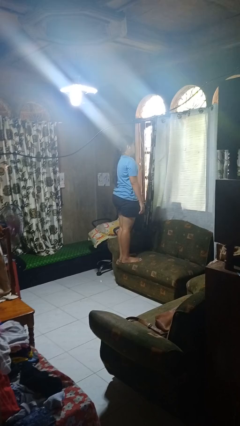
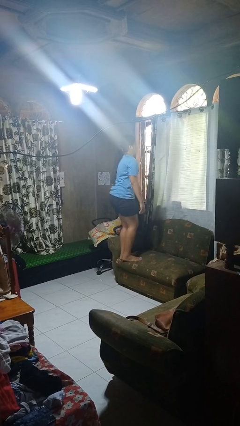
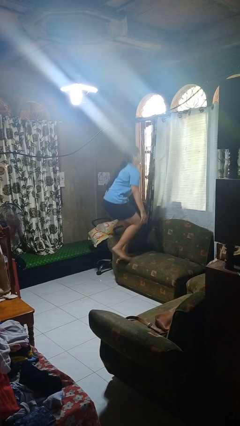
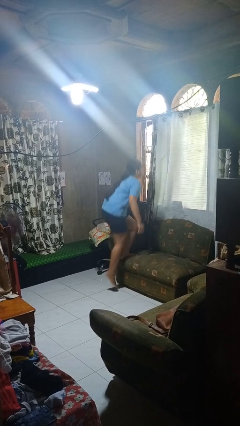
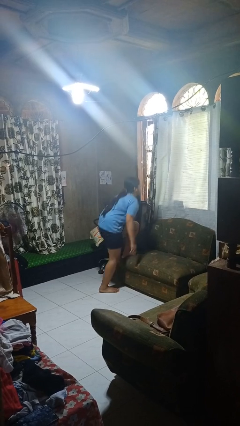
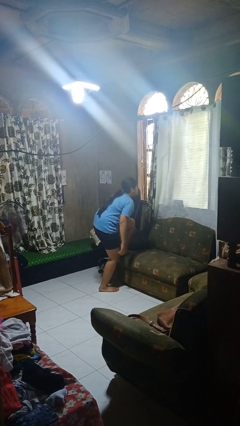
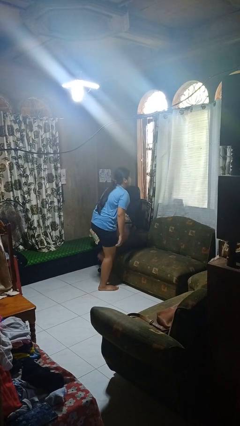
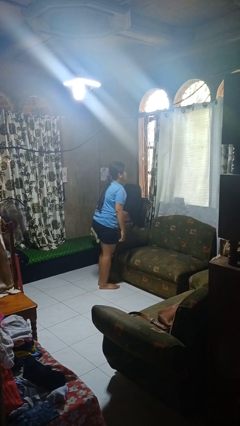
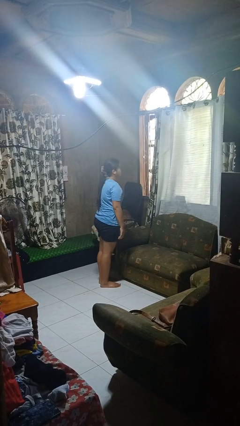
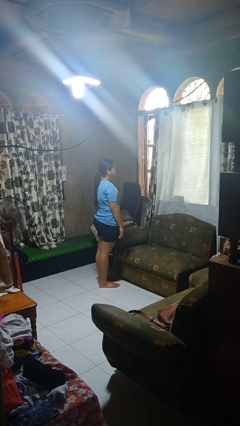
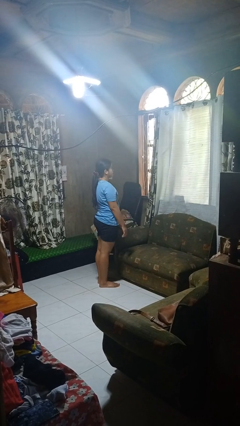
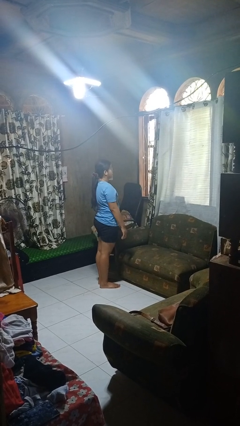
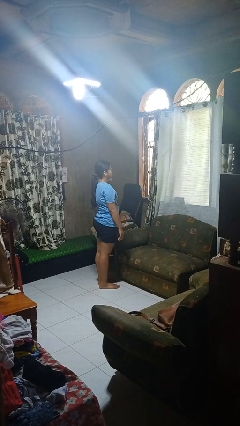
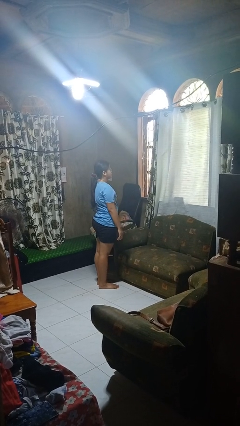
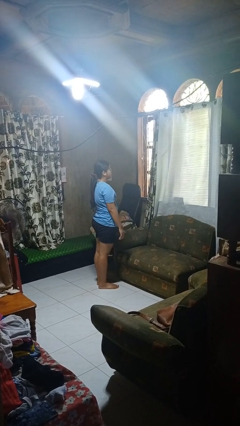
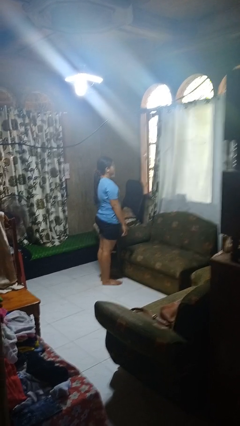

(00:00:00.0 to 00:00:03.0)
person climbs off couch

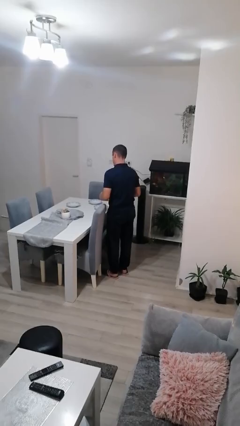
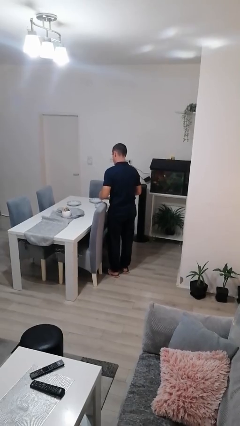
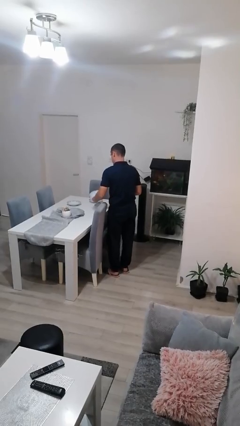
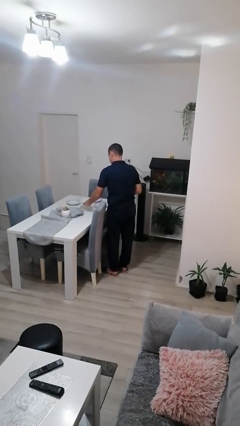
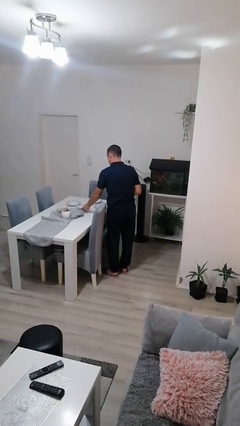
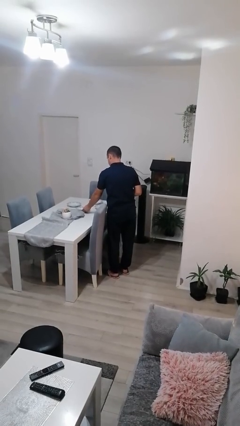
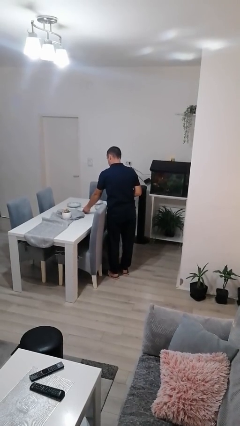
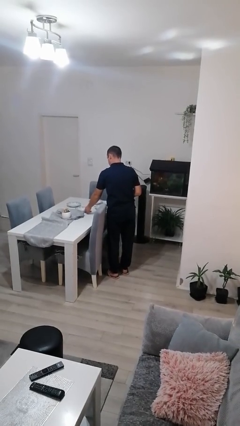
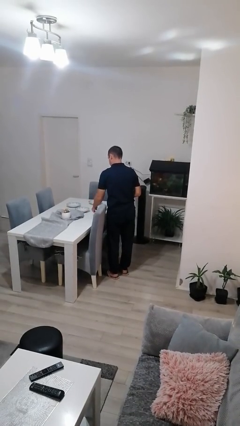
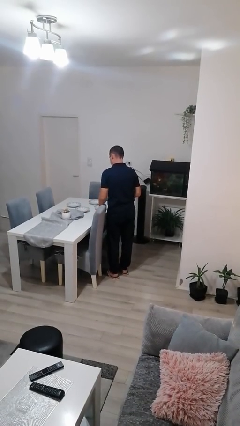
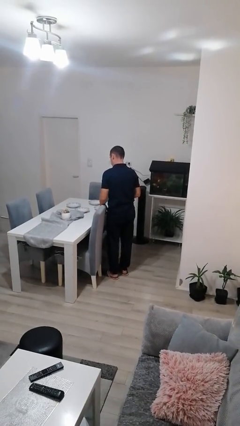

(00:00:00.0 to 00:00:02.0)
person sets table

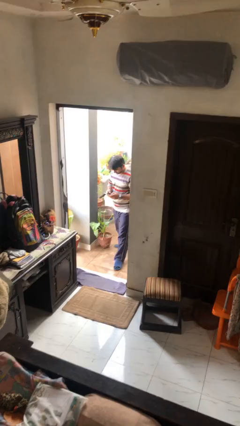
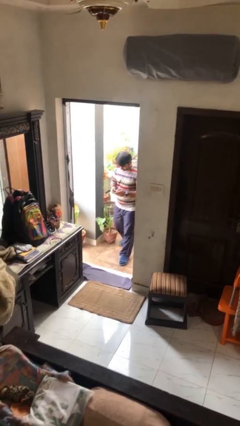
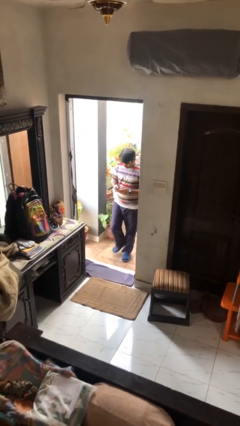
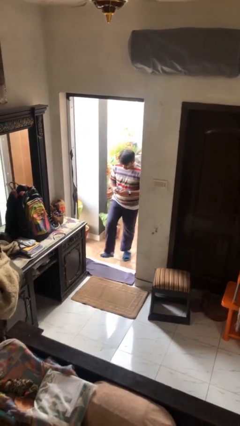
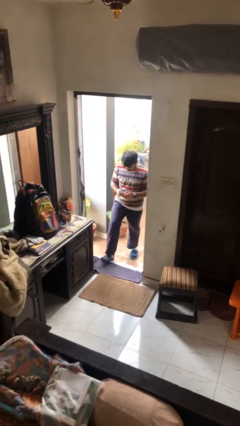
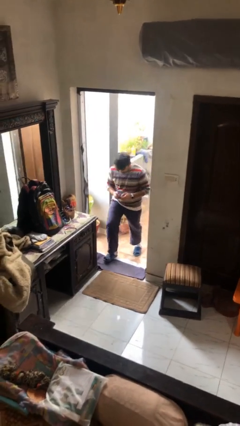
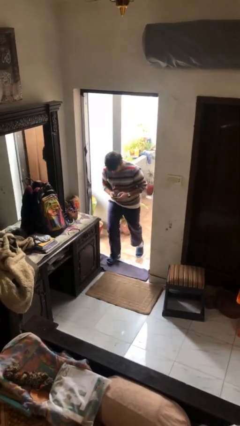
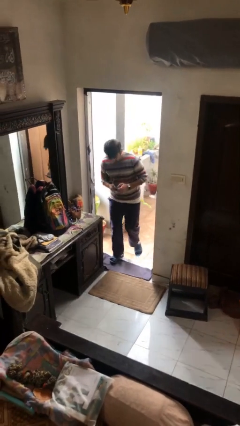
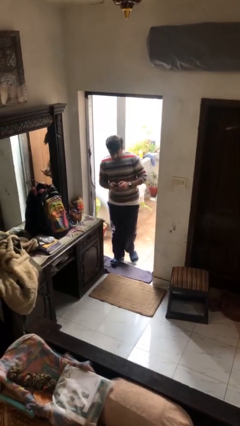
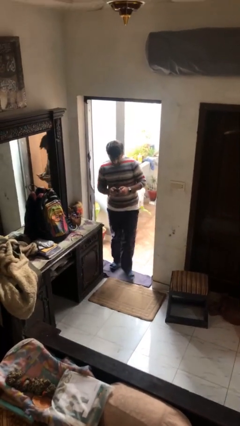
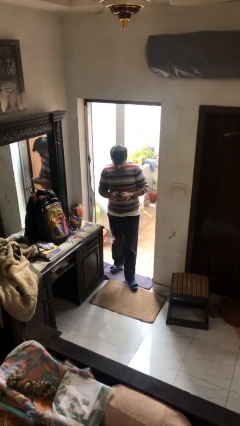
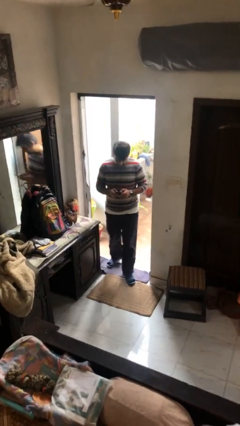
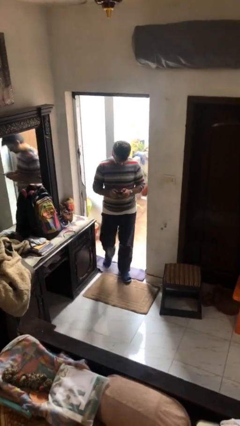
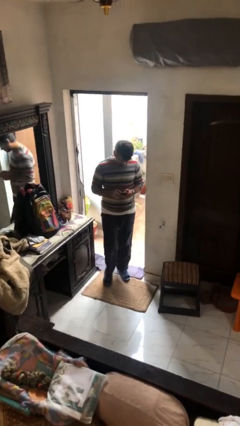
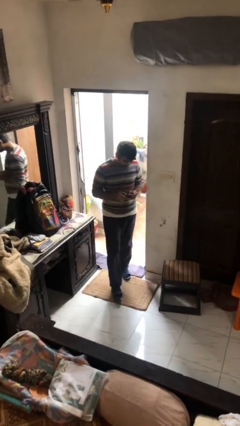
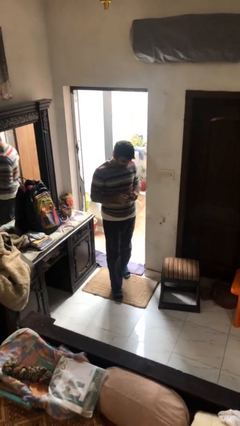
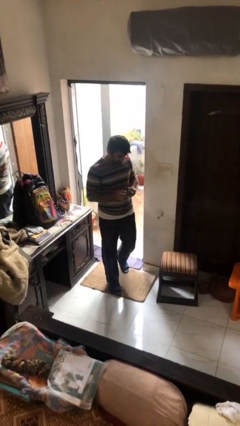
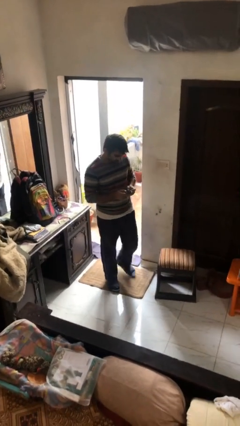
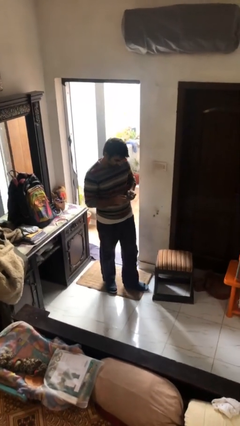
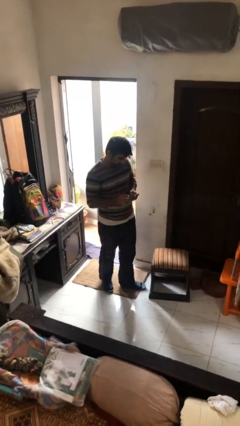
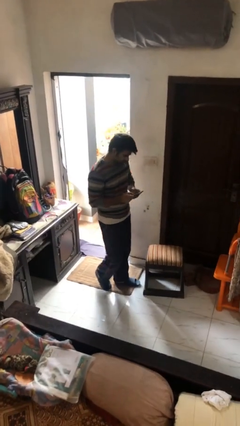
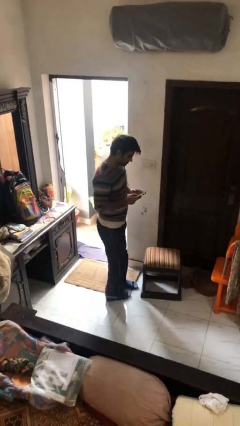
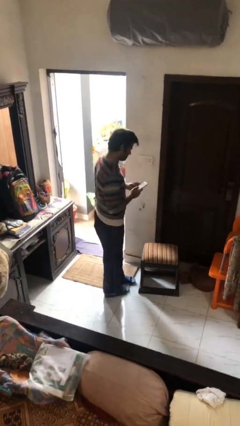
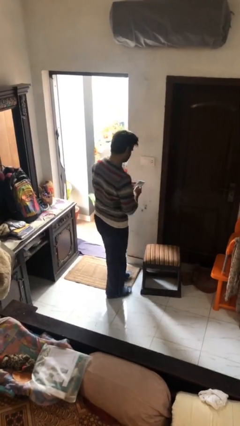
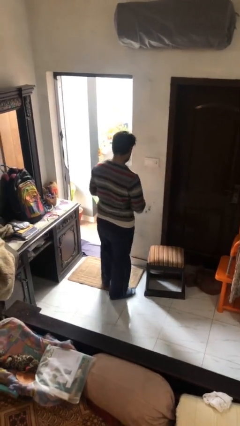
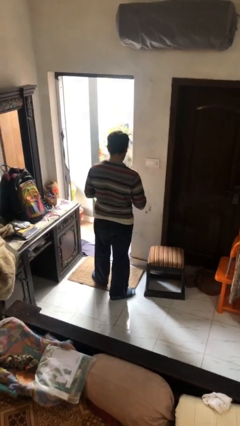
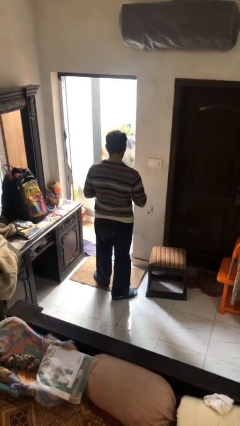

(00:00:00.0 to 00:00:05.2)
person enters scene through structure

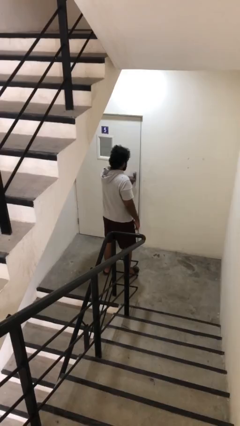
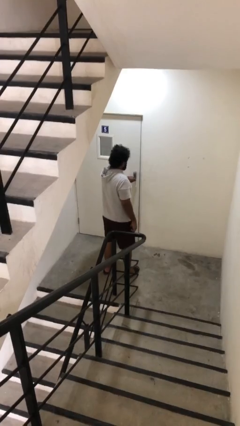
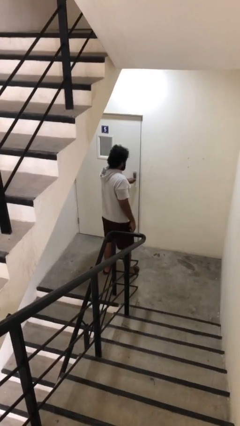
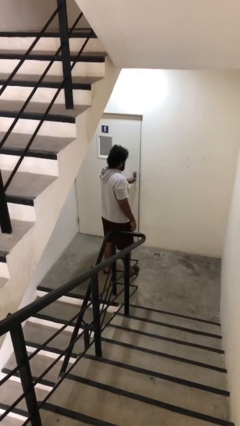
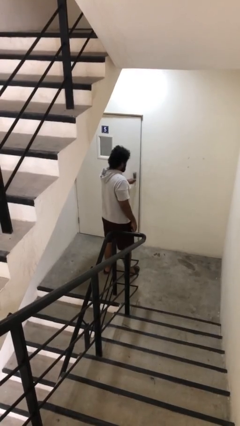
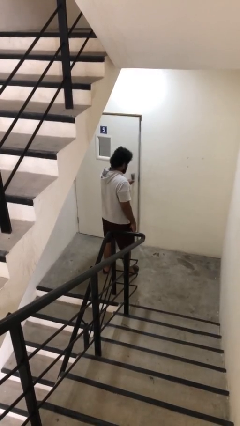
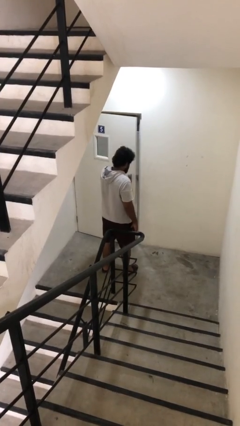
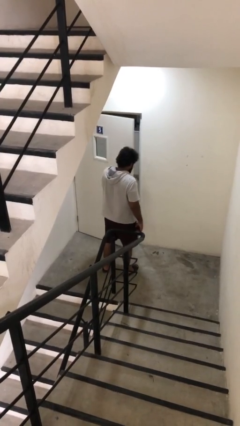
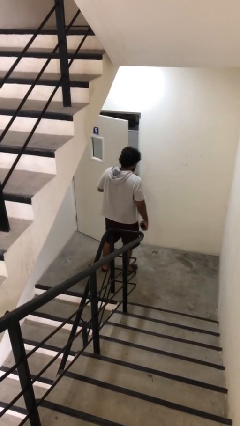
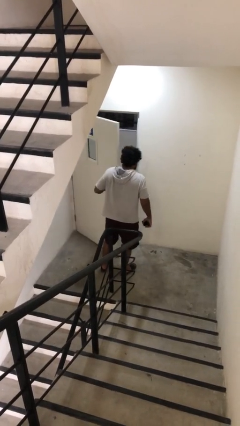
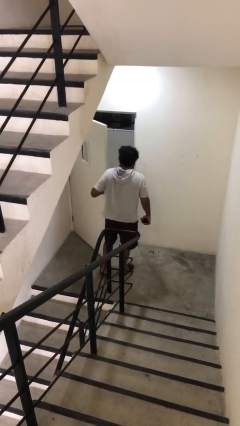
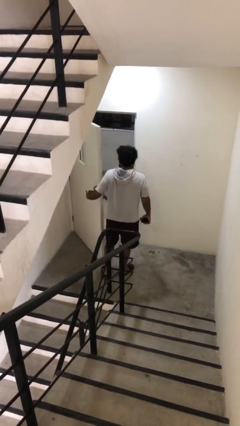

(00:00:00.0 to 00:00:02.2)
person opens facility door

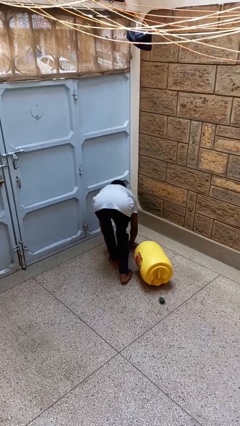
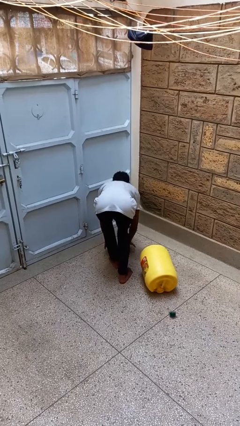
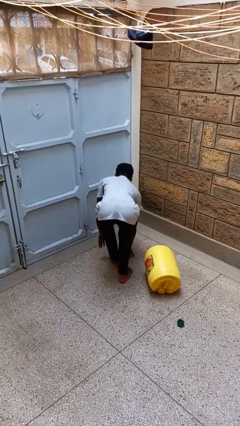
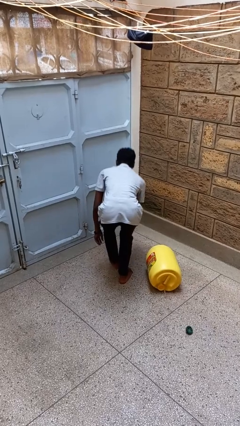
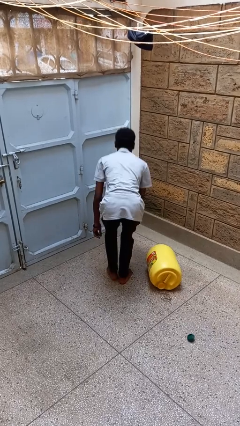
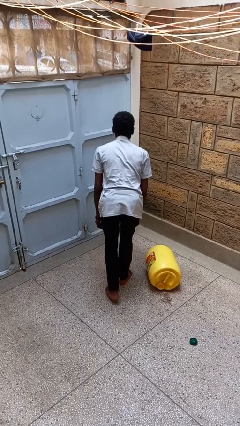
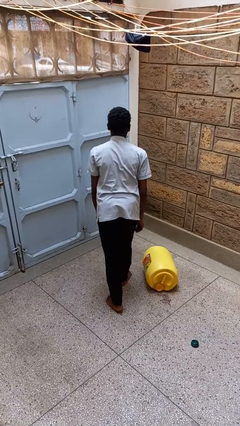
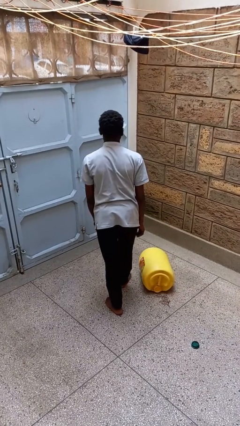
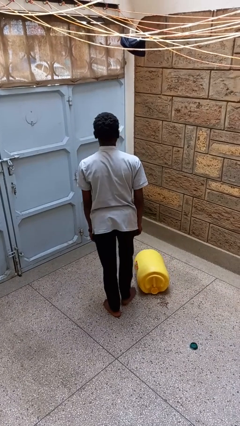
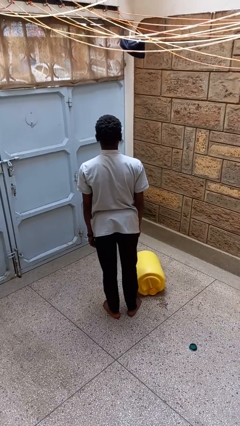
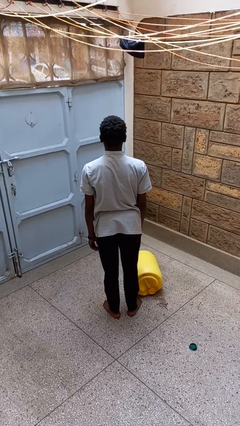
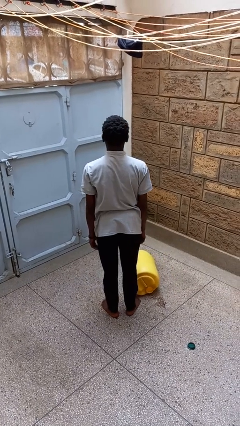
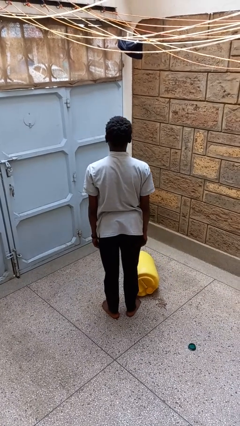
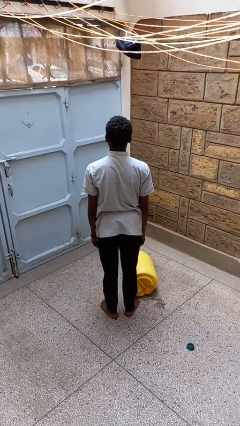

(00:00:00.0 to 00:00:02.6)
person stands up from floor

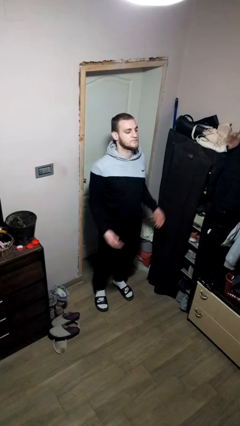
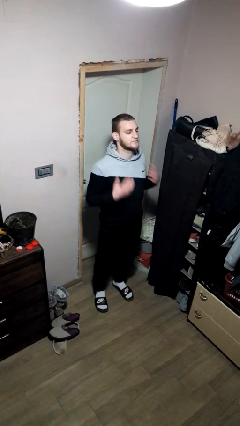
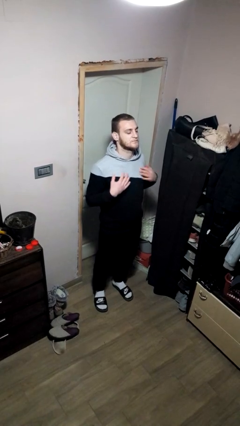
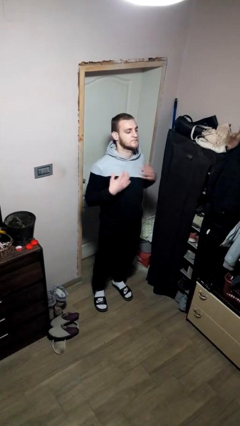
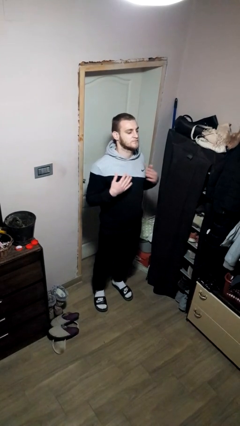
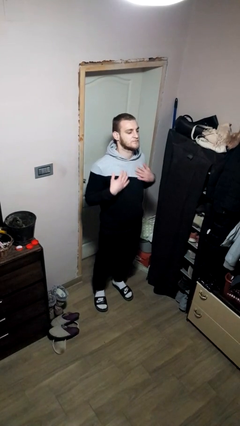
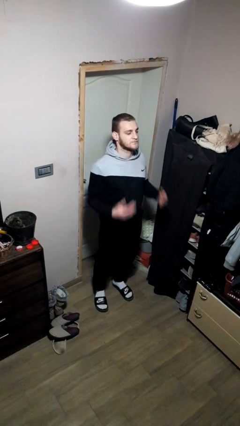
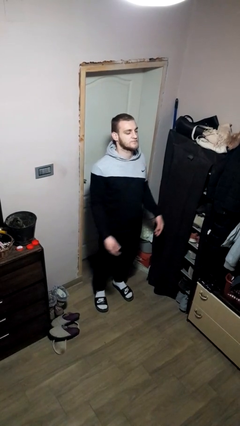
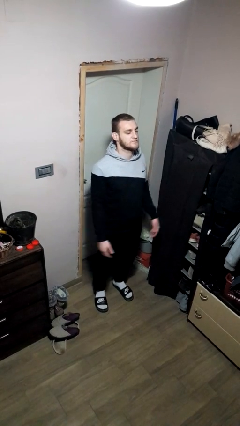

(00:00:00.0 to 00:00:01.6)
person drums on chest

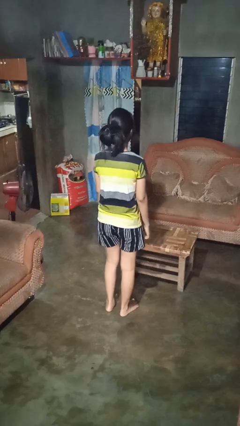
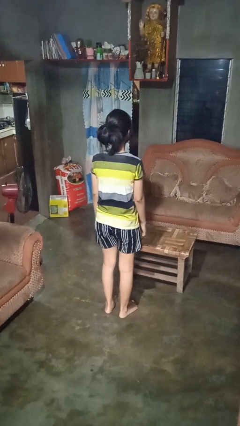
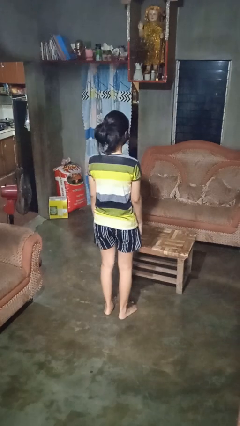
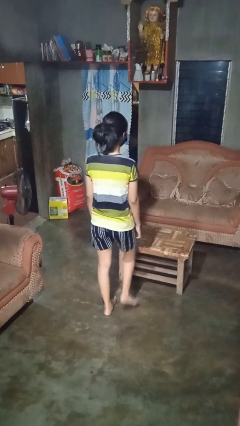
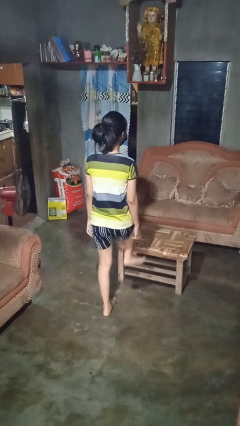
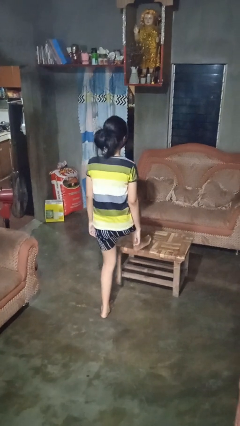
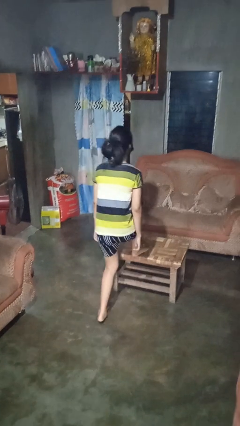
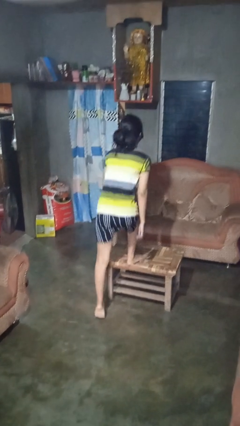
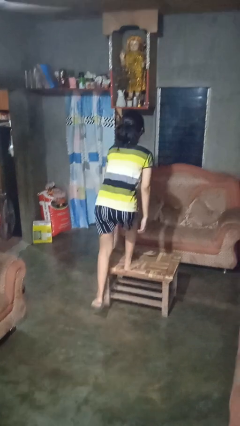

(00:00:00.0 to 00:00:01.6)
person climbs on table
